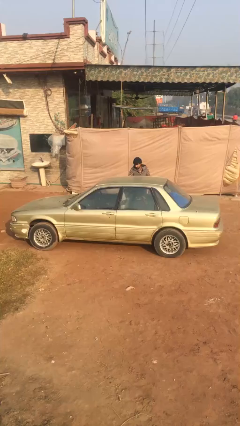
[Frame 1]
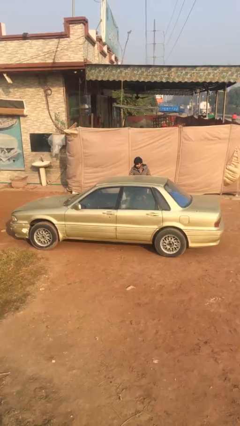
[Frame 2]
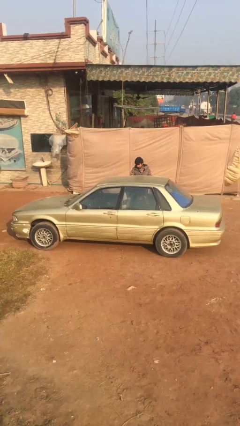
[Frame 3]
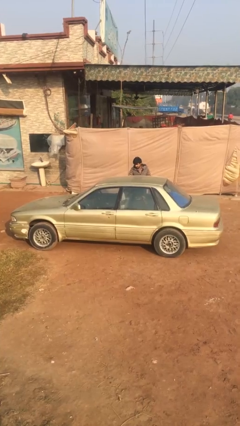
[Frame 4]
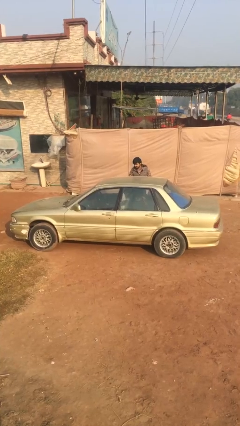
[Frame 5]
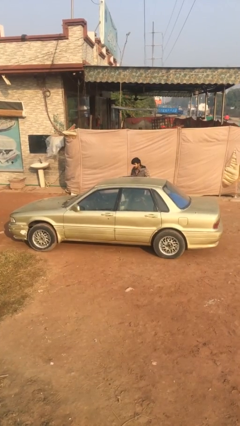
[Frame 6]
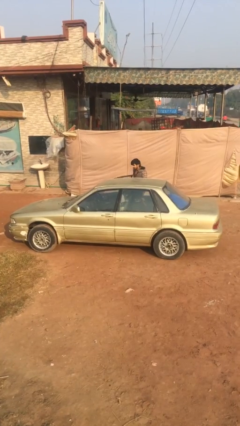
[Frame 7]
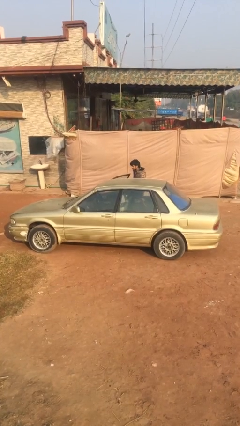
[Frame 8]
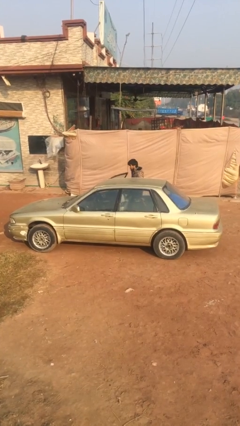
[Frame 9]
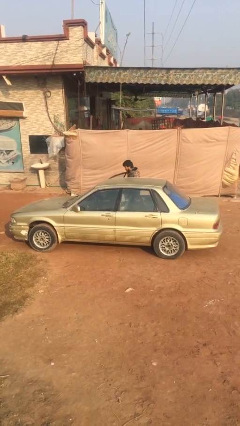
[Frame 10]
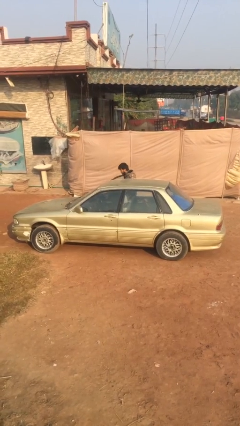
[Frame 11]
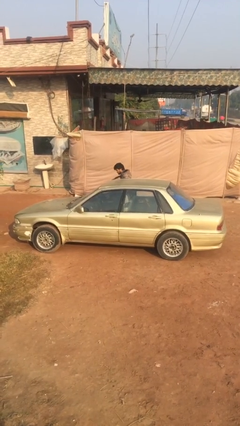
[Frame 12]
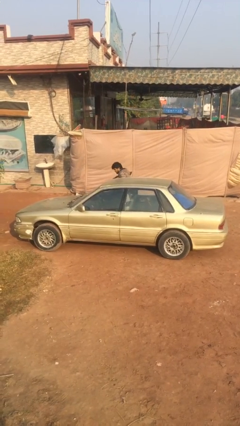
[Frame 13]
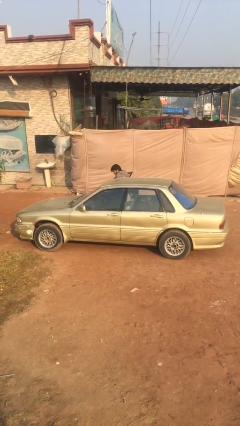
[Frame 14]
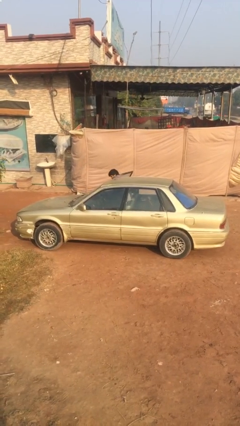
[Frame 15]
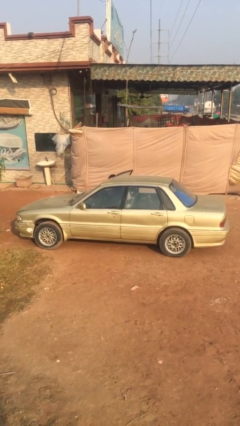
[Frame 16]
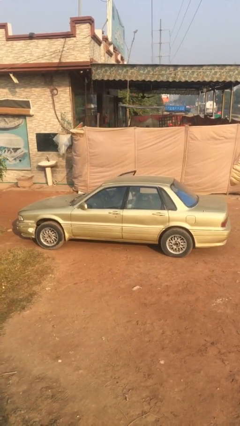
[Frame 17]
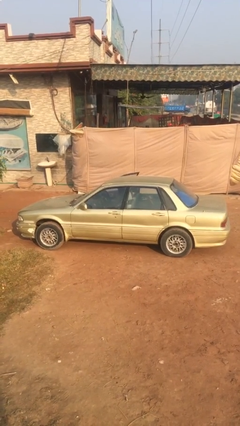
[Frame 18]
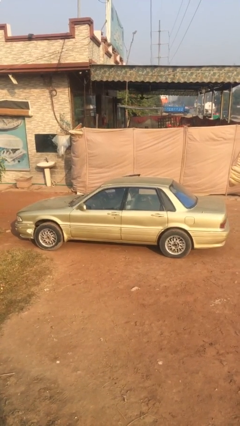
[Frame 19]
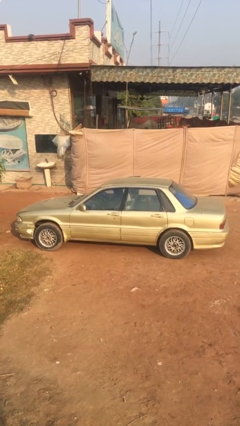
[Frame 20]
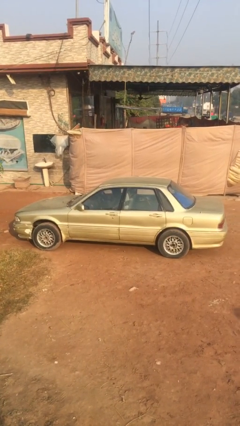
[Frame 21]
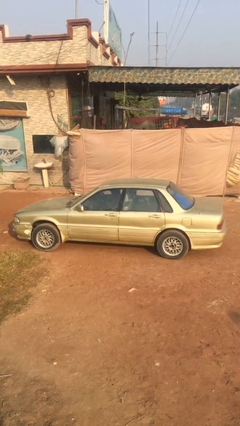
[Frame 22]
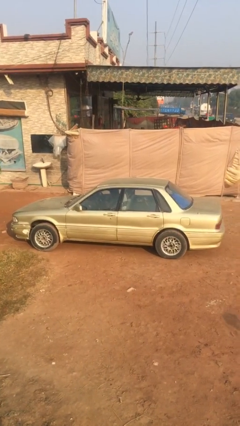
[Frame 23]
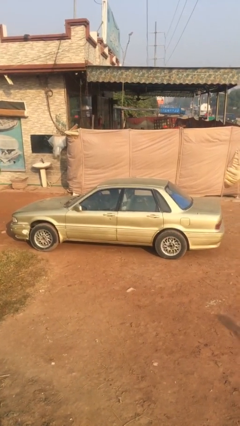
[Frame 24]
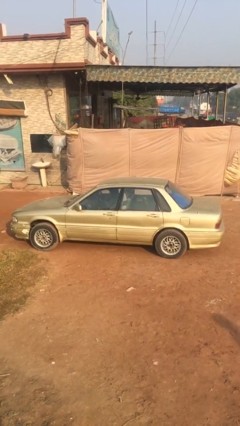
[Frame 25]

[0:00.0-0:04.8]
car picks up person

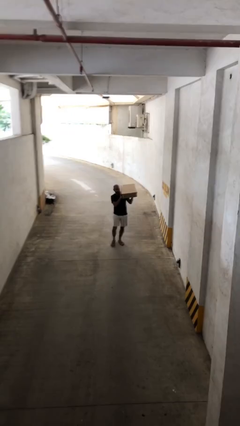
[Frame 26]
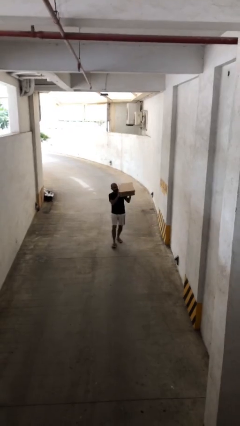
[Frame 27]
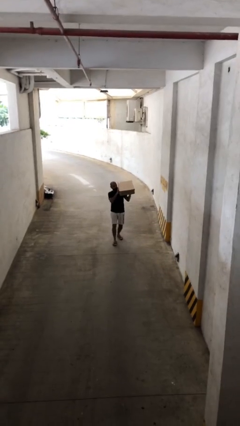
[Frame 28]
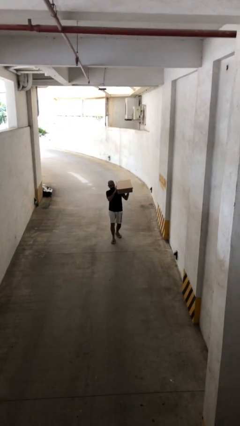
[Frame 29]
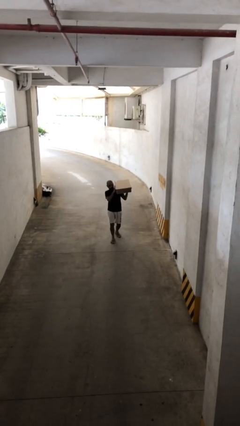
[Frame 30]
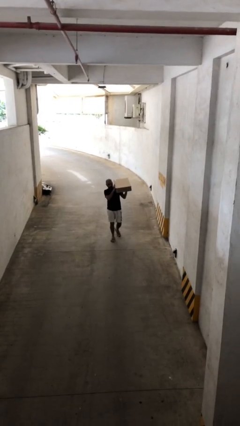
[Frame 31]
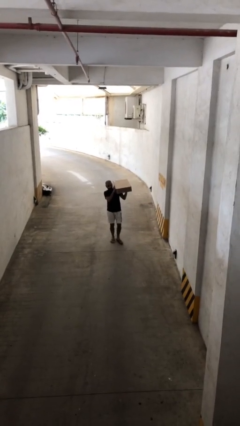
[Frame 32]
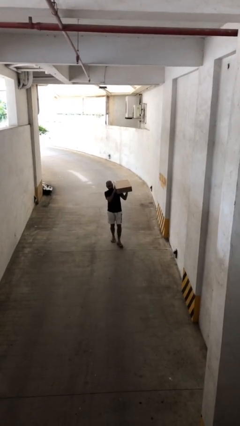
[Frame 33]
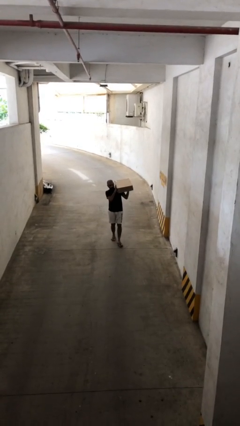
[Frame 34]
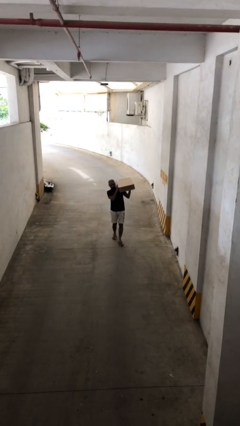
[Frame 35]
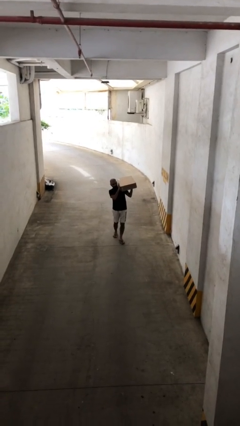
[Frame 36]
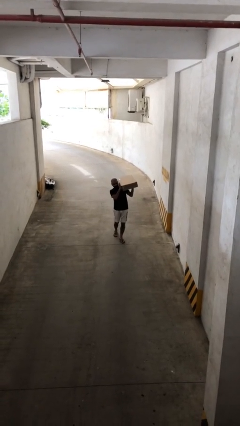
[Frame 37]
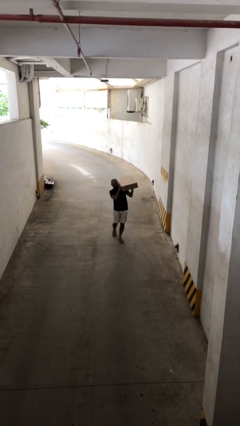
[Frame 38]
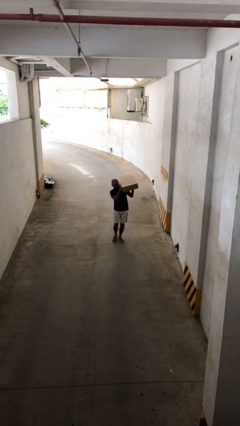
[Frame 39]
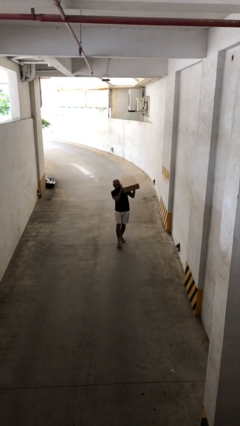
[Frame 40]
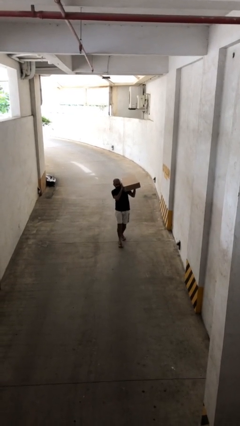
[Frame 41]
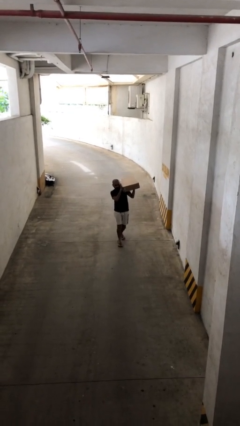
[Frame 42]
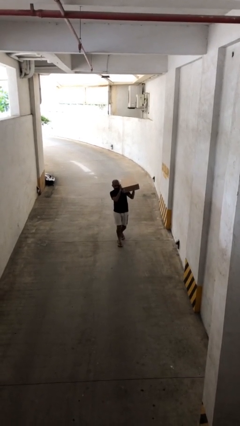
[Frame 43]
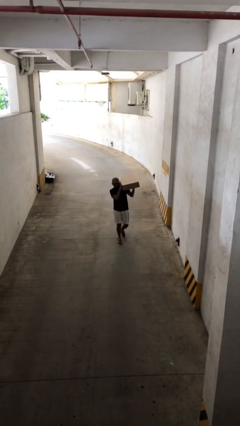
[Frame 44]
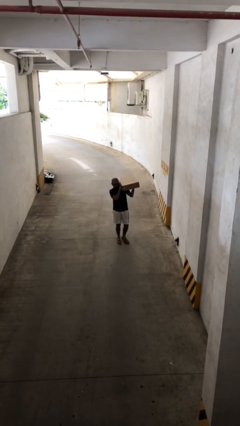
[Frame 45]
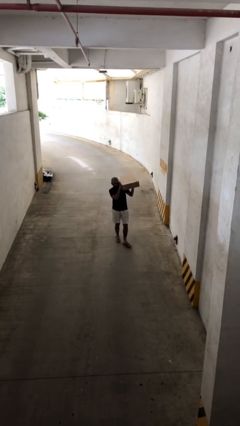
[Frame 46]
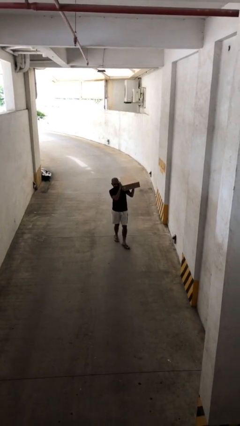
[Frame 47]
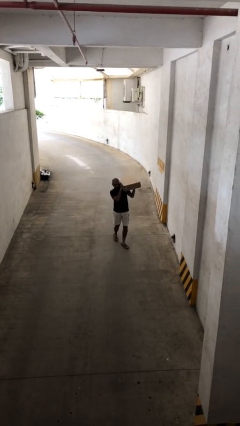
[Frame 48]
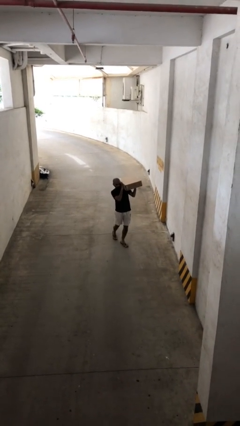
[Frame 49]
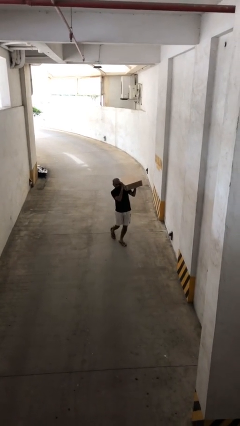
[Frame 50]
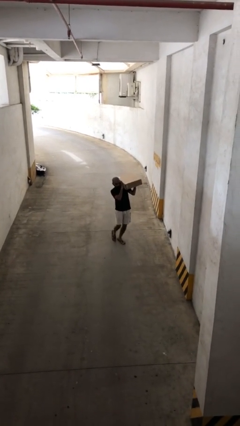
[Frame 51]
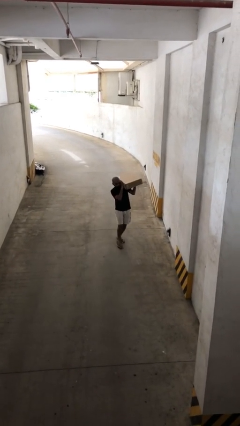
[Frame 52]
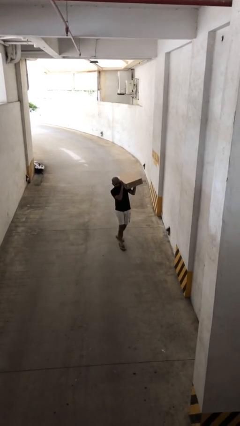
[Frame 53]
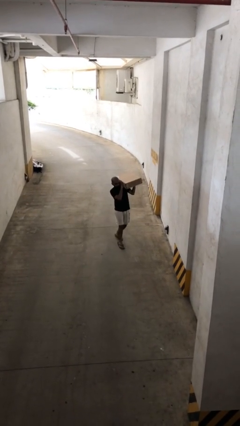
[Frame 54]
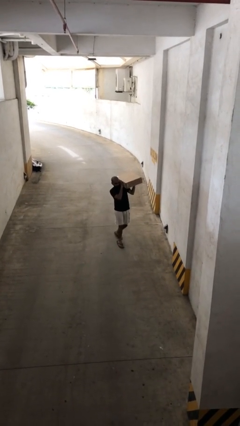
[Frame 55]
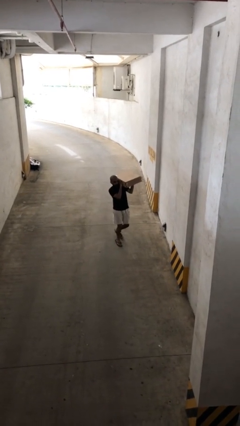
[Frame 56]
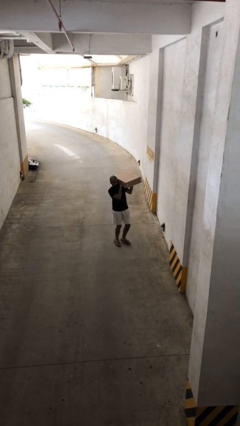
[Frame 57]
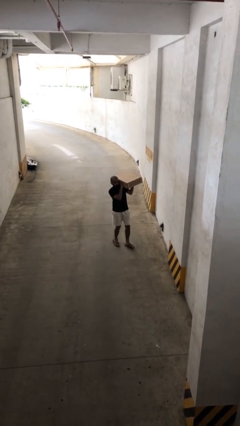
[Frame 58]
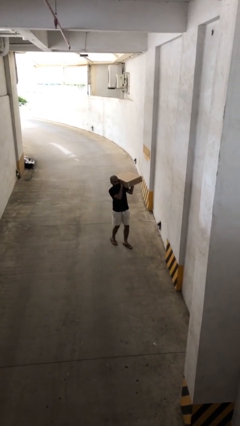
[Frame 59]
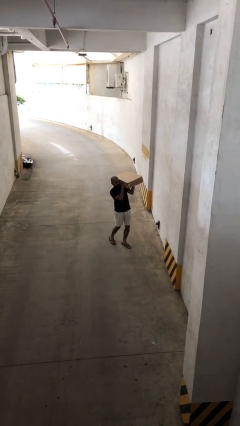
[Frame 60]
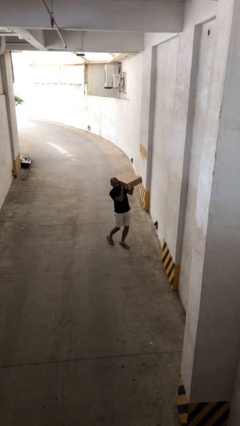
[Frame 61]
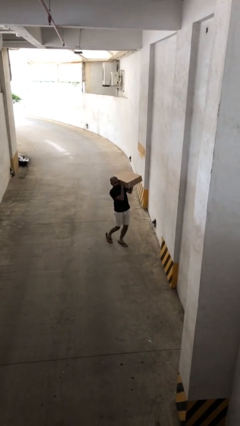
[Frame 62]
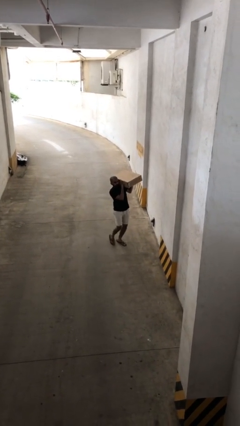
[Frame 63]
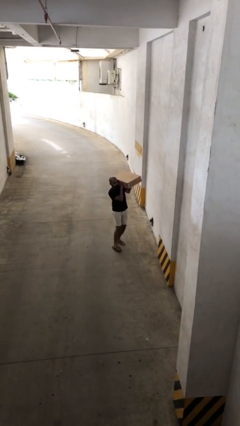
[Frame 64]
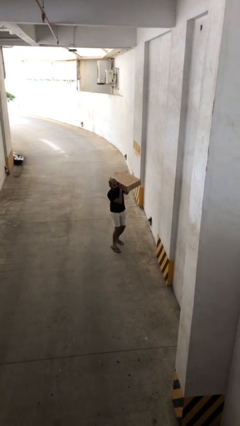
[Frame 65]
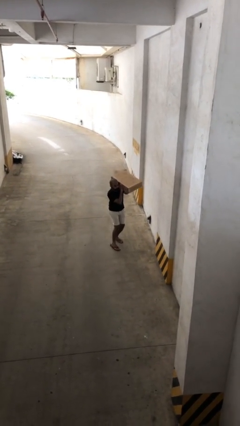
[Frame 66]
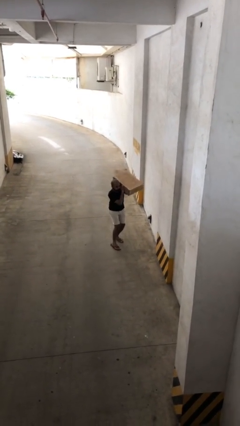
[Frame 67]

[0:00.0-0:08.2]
person carries heavy object

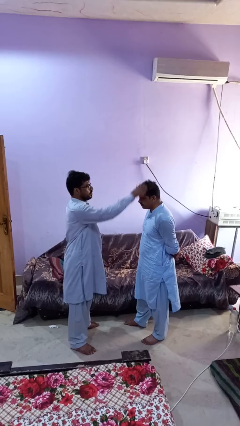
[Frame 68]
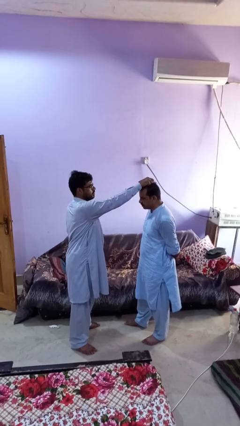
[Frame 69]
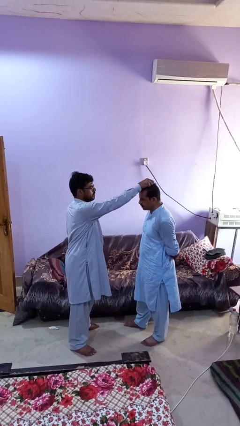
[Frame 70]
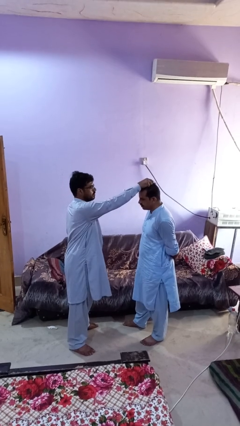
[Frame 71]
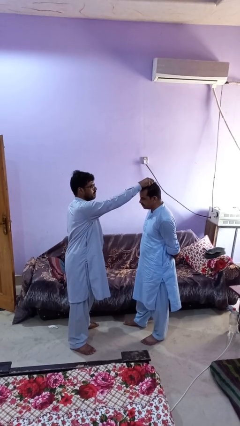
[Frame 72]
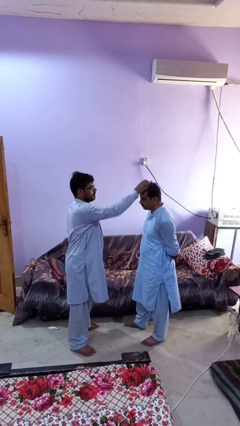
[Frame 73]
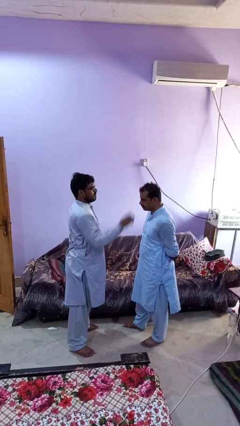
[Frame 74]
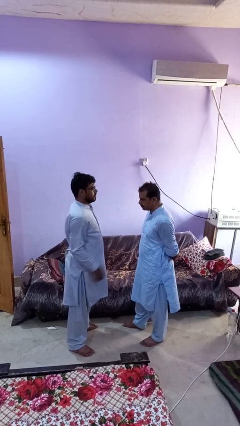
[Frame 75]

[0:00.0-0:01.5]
person grabs person by hair

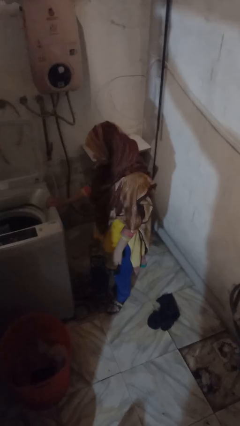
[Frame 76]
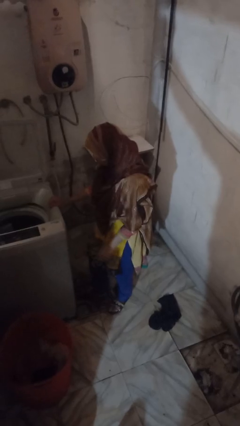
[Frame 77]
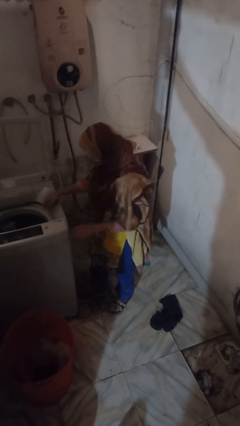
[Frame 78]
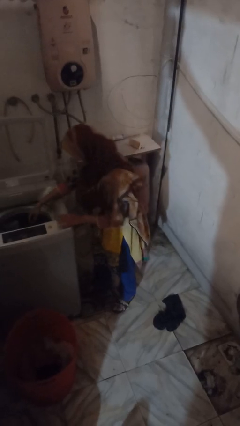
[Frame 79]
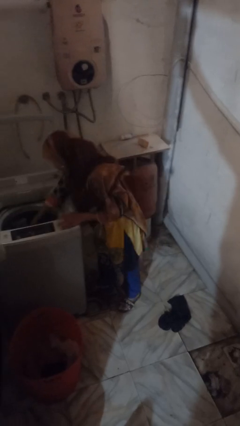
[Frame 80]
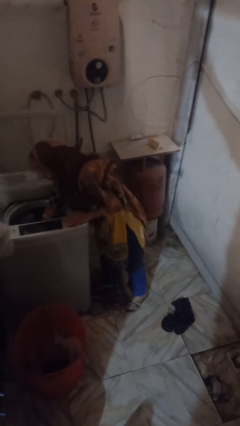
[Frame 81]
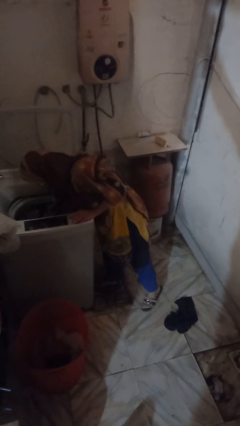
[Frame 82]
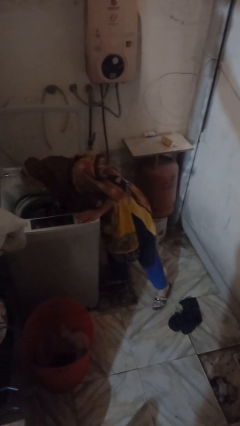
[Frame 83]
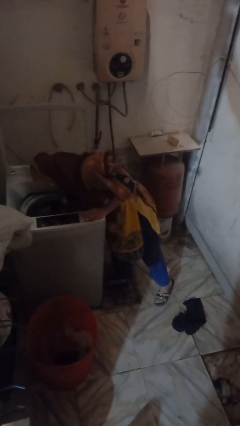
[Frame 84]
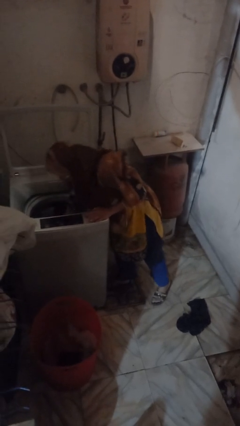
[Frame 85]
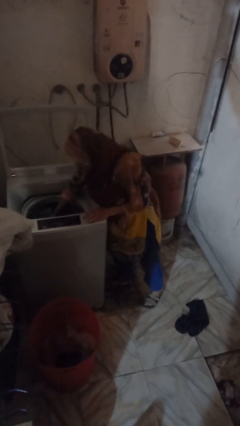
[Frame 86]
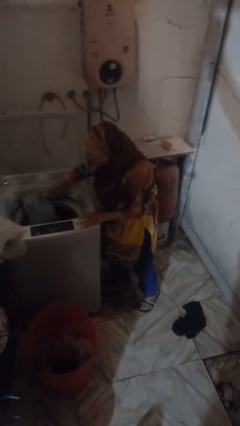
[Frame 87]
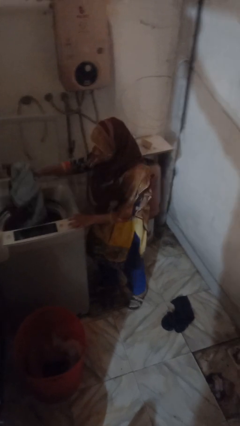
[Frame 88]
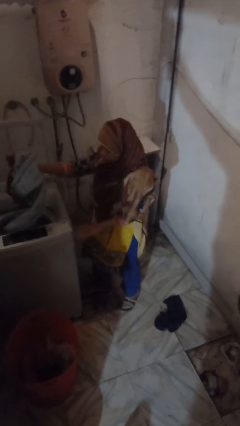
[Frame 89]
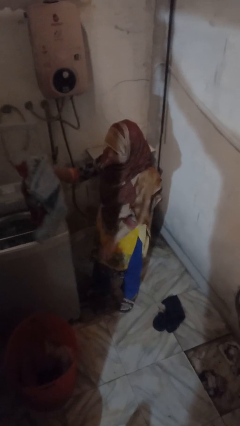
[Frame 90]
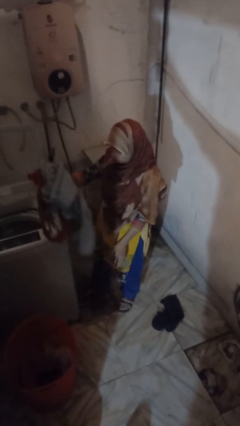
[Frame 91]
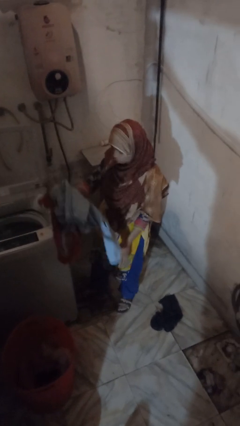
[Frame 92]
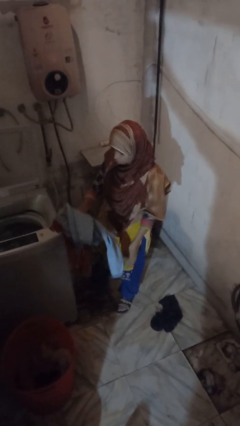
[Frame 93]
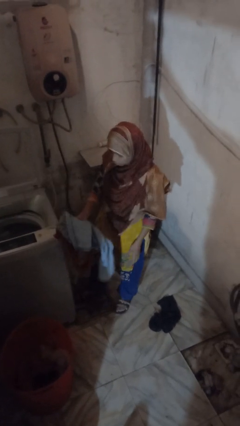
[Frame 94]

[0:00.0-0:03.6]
person unloads dryer
